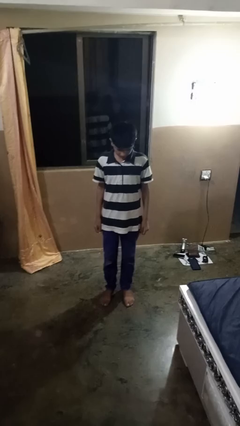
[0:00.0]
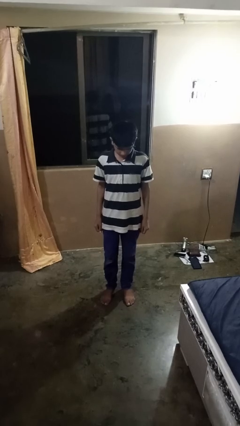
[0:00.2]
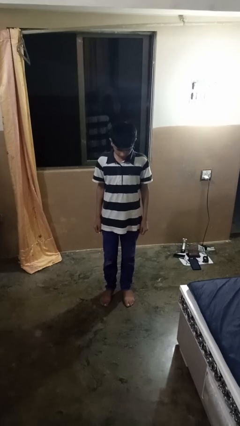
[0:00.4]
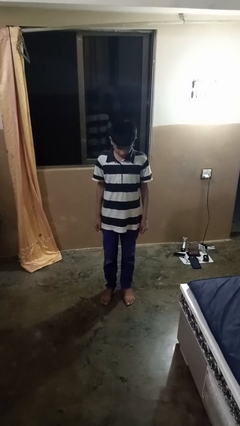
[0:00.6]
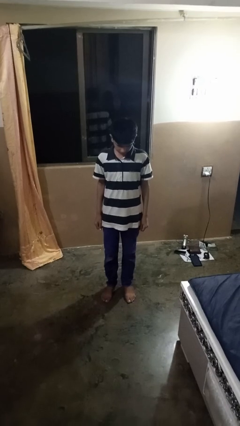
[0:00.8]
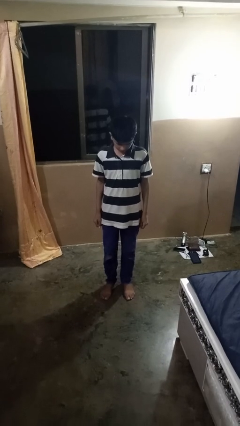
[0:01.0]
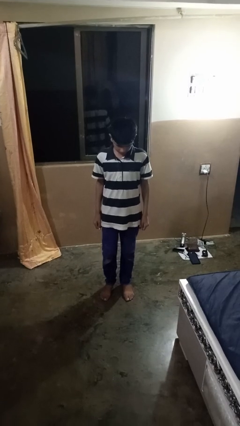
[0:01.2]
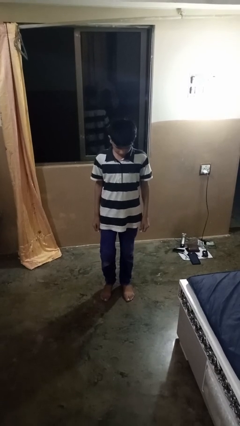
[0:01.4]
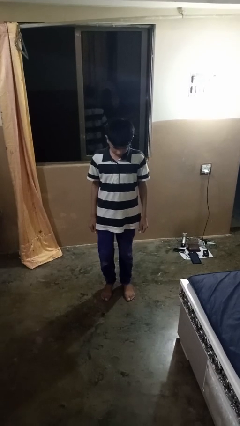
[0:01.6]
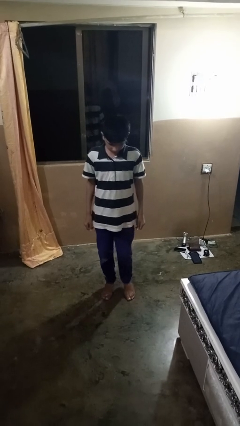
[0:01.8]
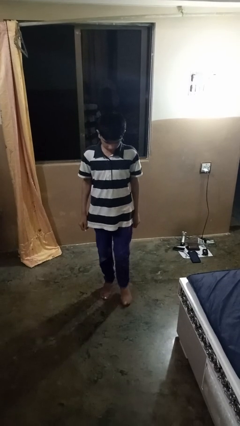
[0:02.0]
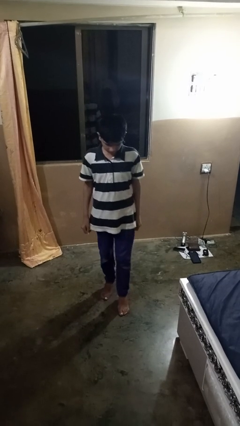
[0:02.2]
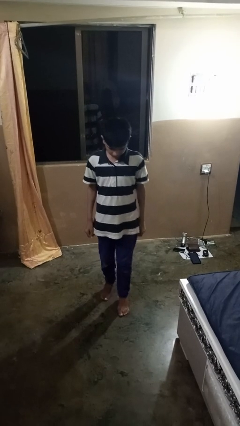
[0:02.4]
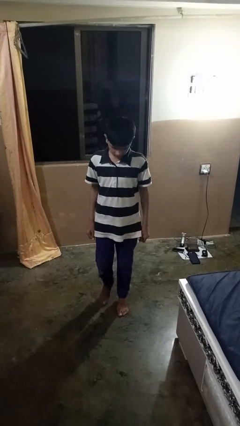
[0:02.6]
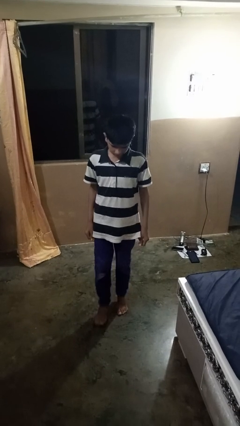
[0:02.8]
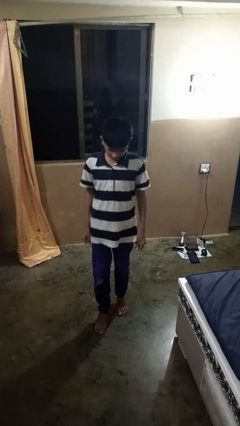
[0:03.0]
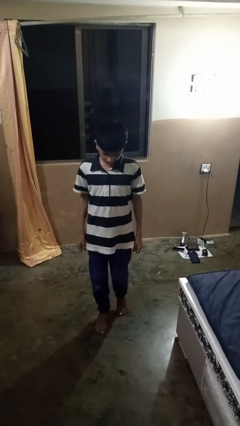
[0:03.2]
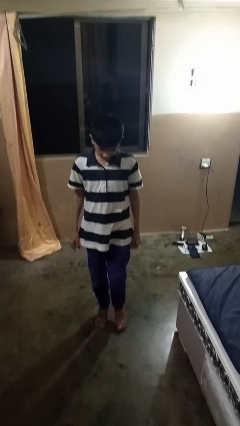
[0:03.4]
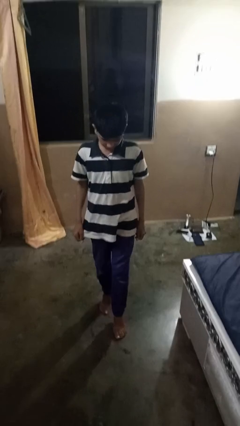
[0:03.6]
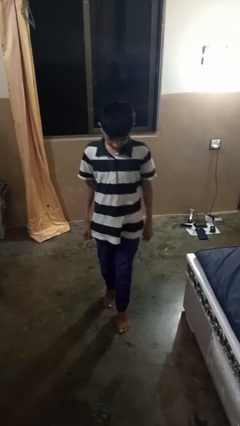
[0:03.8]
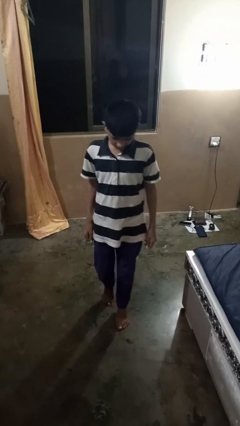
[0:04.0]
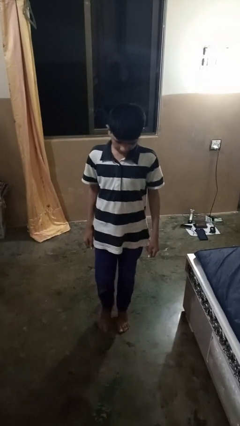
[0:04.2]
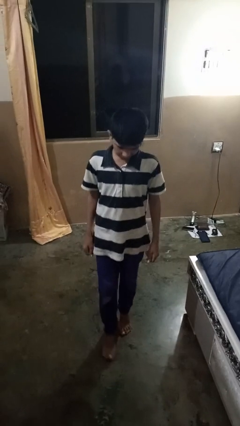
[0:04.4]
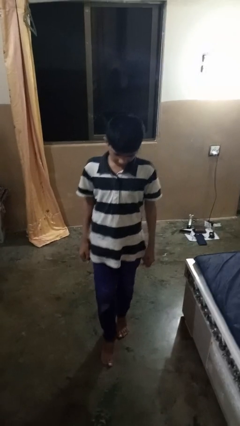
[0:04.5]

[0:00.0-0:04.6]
person walks tiptoe

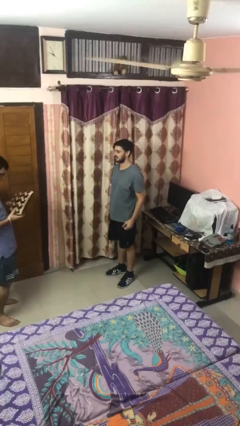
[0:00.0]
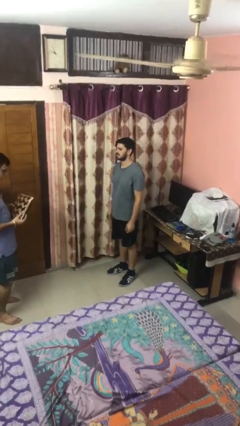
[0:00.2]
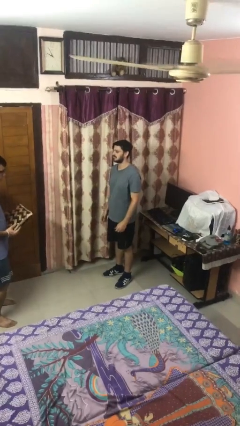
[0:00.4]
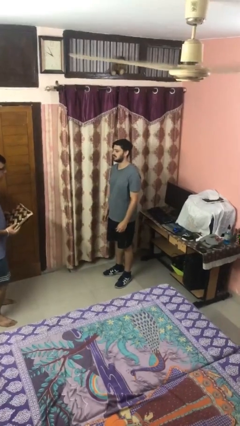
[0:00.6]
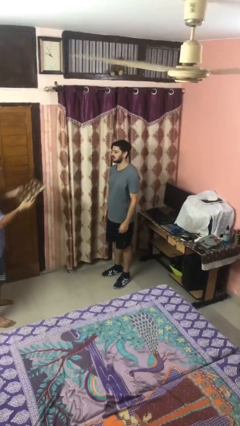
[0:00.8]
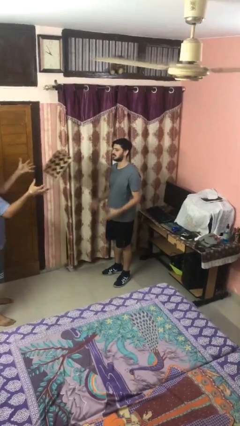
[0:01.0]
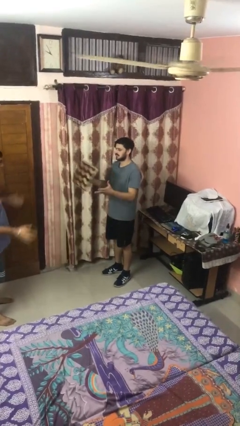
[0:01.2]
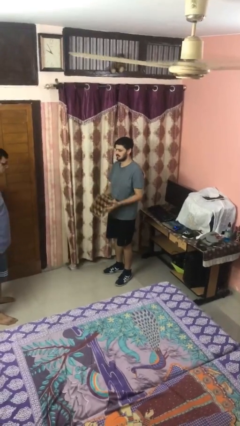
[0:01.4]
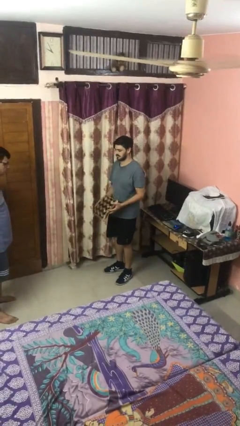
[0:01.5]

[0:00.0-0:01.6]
person catches object from person

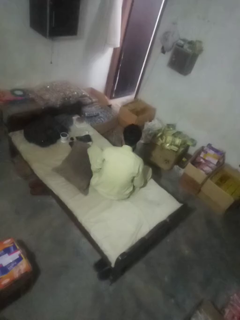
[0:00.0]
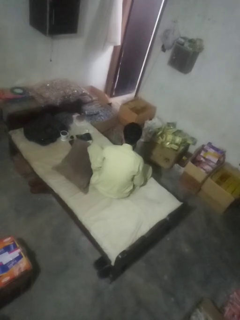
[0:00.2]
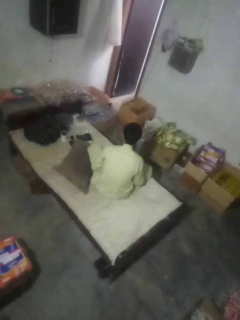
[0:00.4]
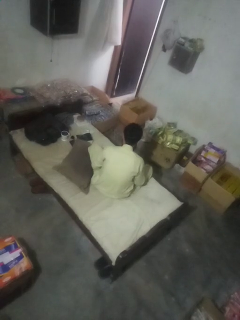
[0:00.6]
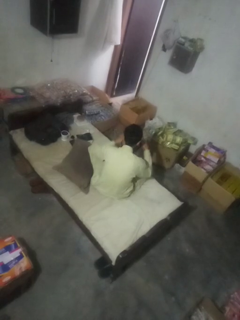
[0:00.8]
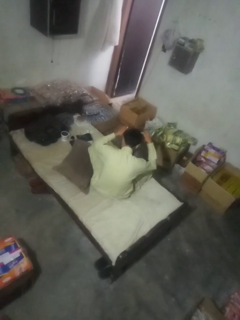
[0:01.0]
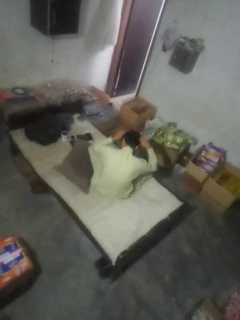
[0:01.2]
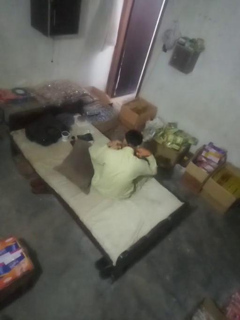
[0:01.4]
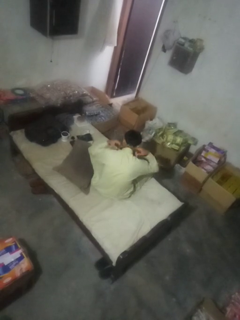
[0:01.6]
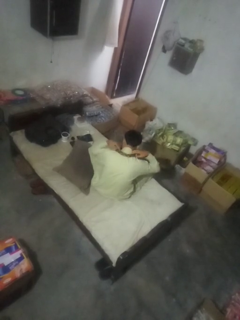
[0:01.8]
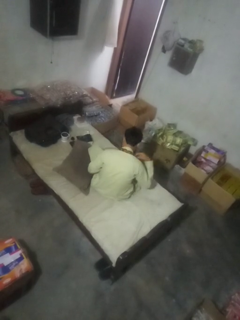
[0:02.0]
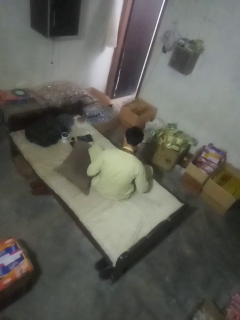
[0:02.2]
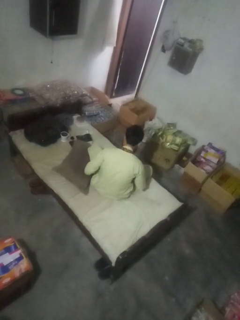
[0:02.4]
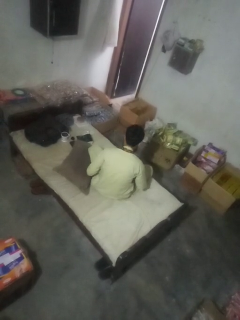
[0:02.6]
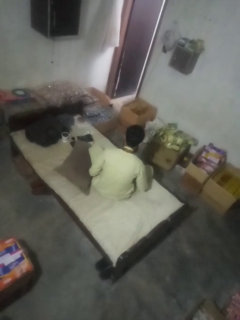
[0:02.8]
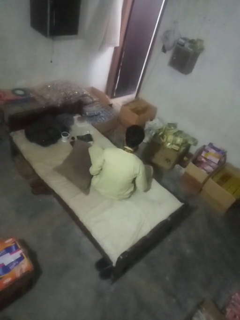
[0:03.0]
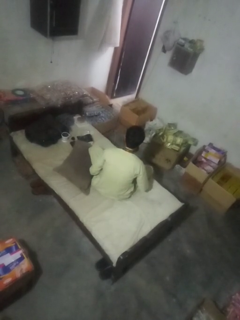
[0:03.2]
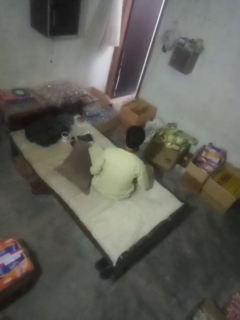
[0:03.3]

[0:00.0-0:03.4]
person puts on necktie

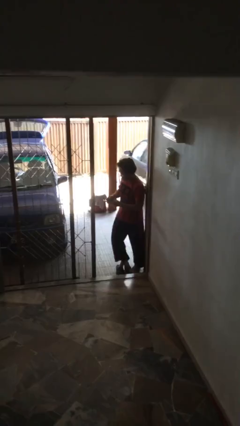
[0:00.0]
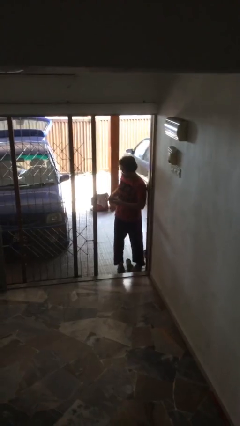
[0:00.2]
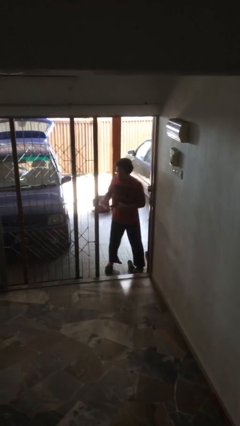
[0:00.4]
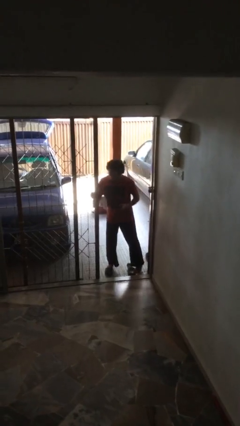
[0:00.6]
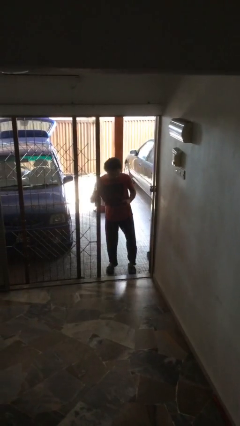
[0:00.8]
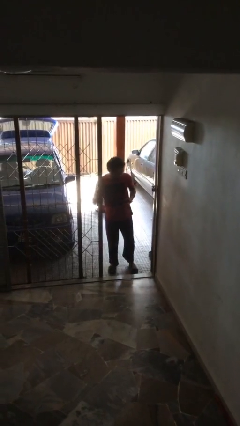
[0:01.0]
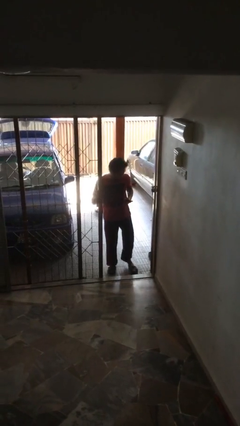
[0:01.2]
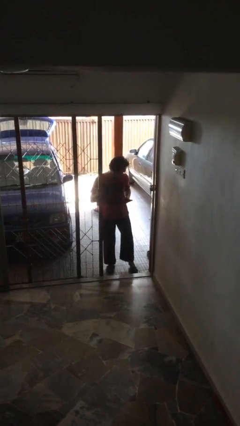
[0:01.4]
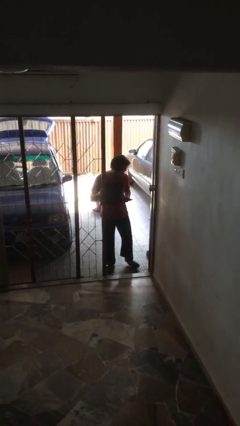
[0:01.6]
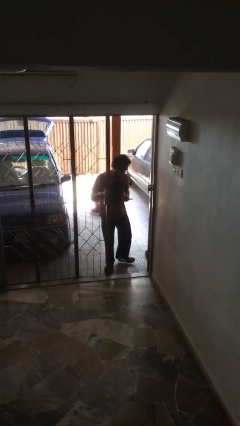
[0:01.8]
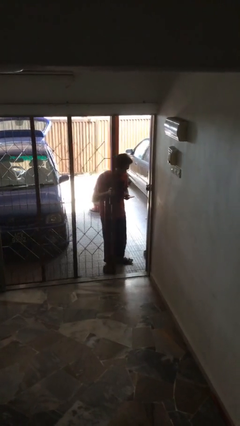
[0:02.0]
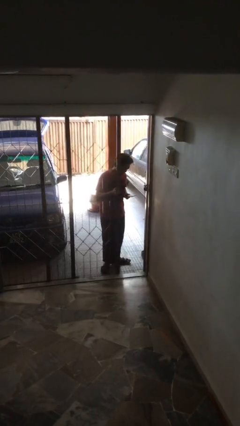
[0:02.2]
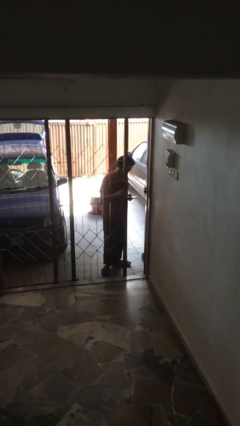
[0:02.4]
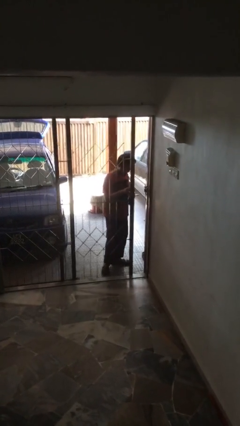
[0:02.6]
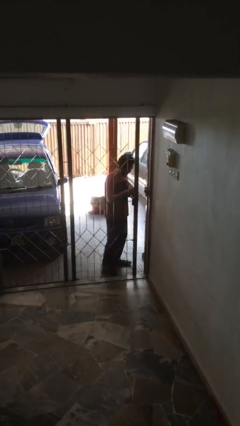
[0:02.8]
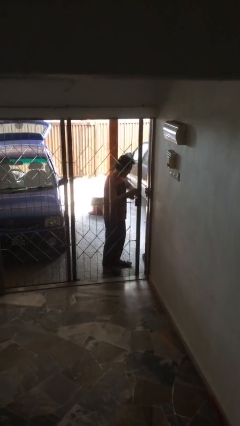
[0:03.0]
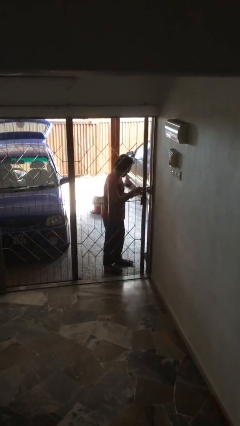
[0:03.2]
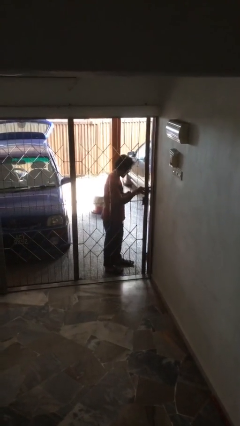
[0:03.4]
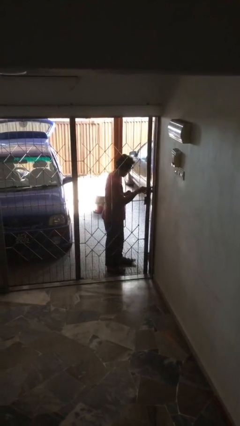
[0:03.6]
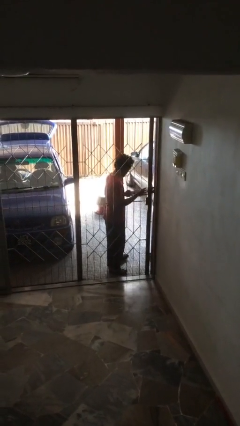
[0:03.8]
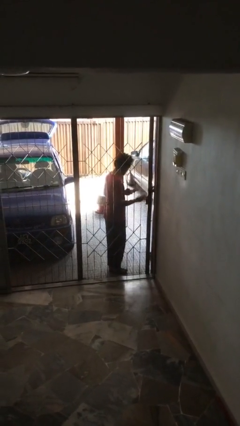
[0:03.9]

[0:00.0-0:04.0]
person closes facility door

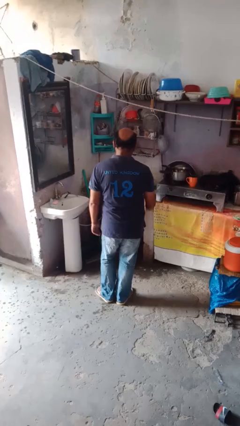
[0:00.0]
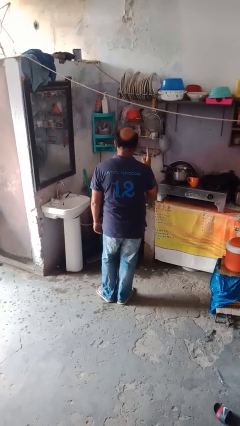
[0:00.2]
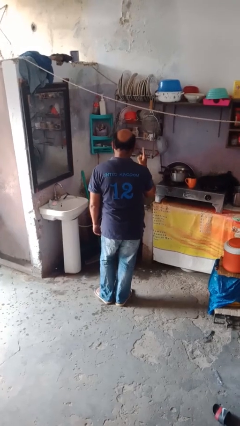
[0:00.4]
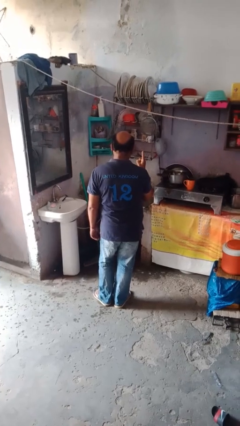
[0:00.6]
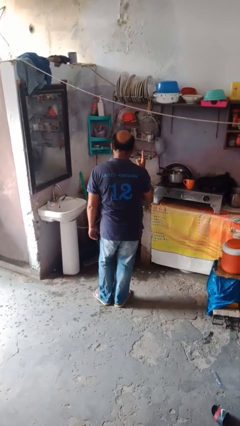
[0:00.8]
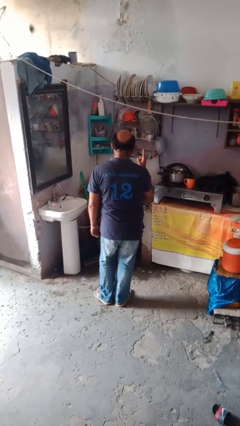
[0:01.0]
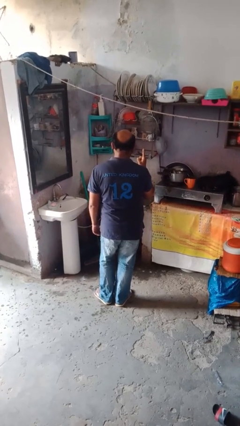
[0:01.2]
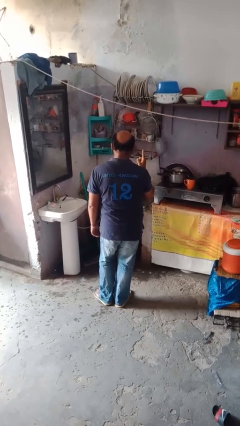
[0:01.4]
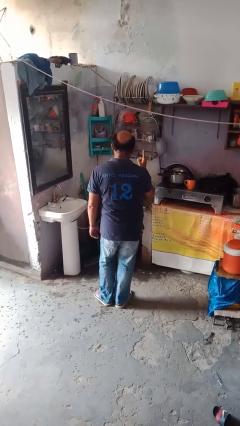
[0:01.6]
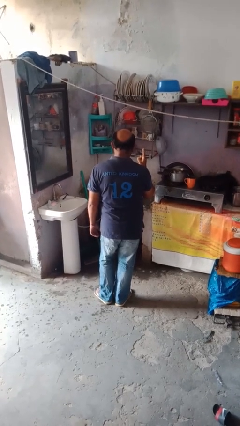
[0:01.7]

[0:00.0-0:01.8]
person gestures number one

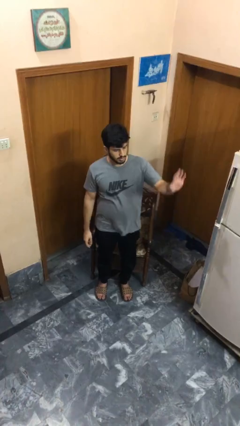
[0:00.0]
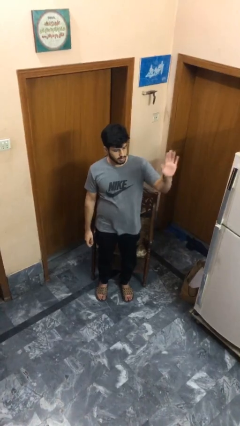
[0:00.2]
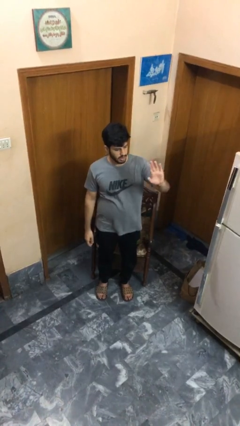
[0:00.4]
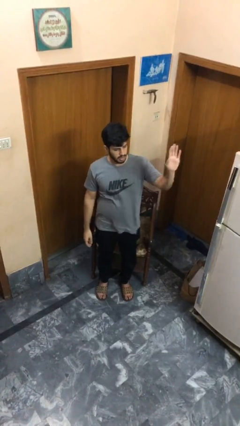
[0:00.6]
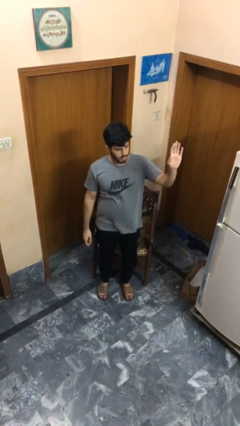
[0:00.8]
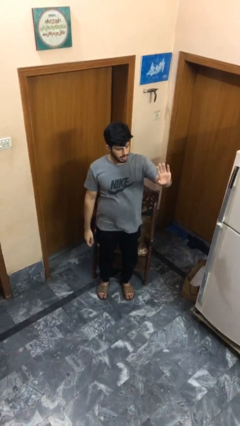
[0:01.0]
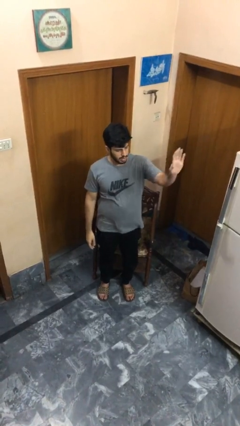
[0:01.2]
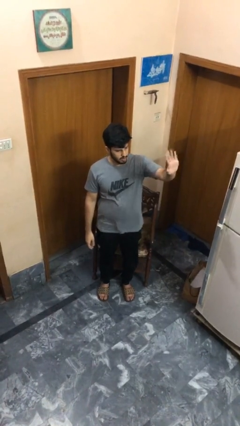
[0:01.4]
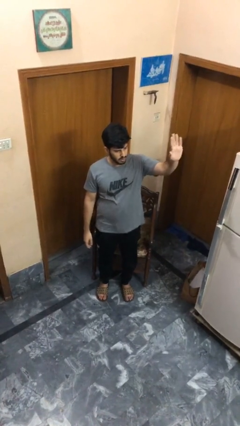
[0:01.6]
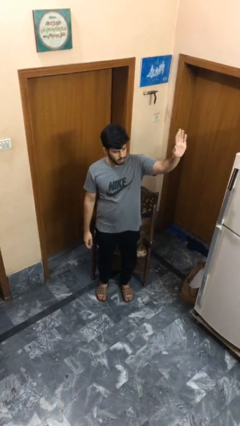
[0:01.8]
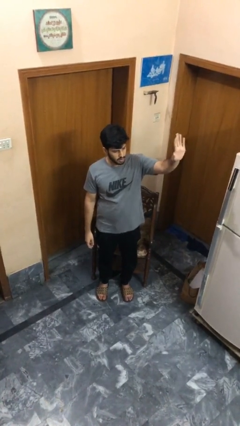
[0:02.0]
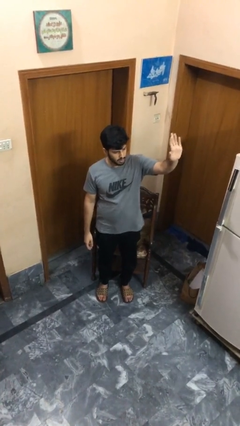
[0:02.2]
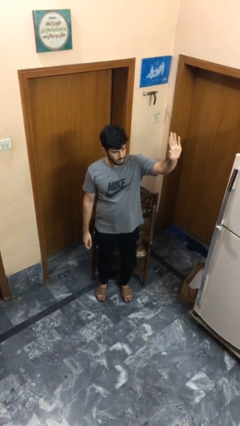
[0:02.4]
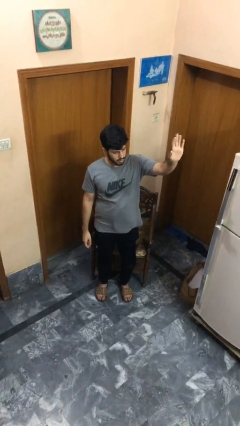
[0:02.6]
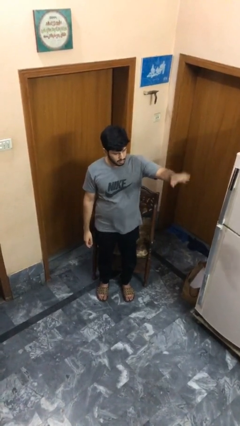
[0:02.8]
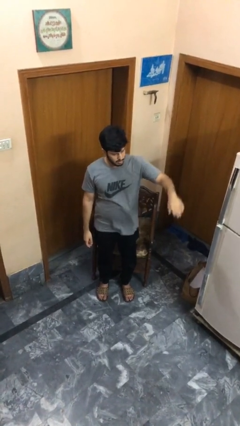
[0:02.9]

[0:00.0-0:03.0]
person waves at person
